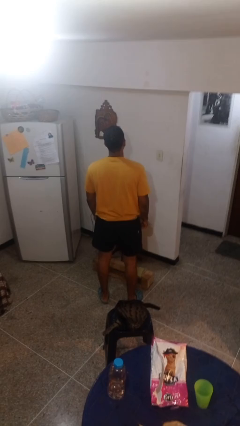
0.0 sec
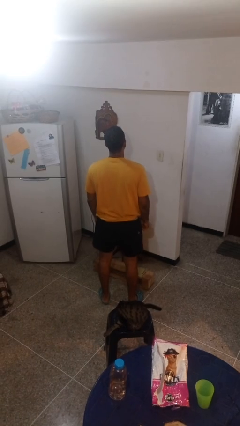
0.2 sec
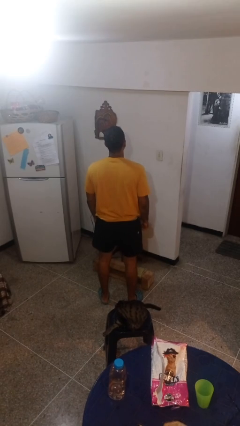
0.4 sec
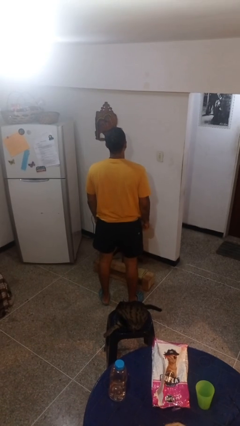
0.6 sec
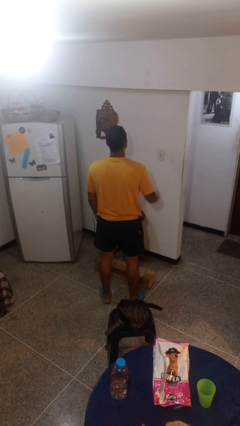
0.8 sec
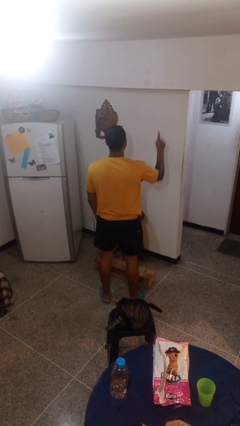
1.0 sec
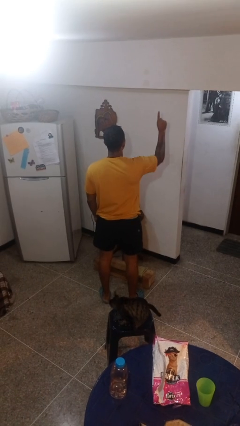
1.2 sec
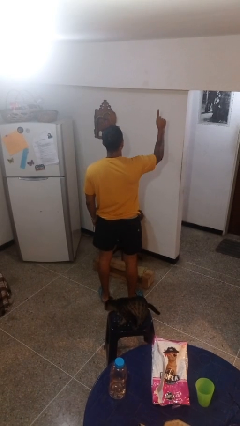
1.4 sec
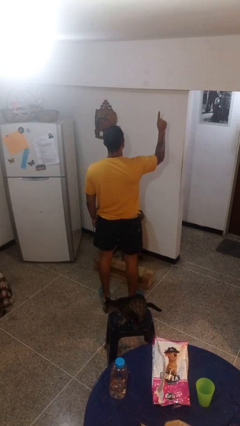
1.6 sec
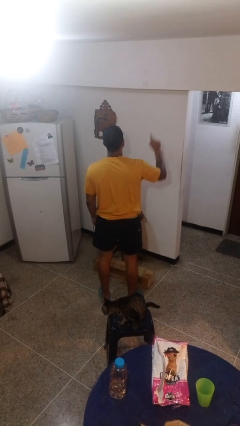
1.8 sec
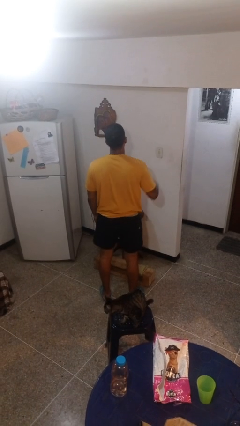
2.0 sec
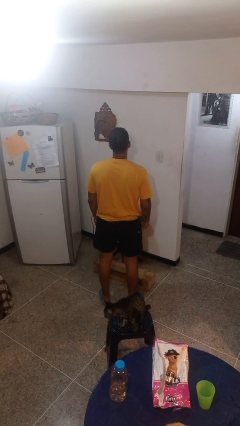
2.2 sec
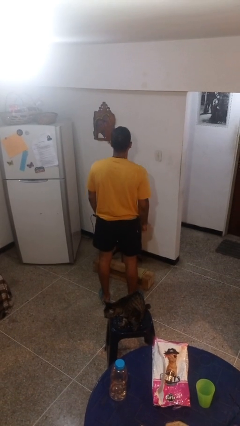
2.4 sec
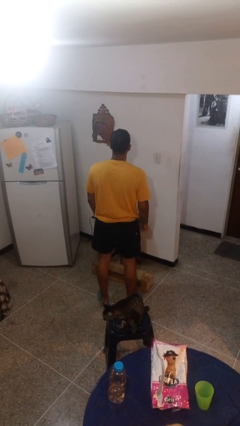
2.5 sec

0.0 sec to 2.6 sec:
person gestures number one

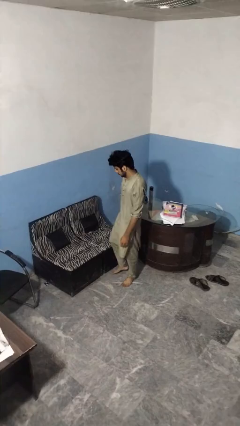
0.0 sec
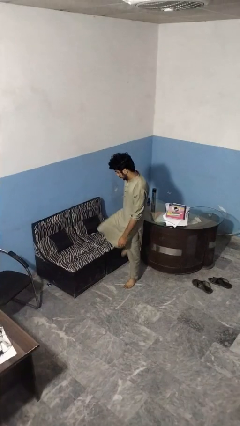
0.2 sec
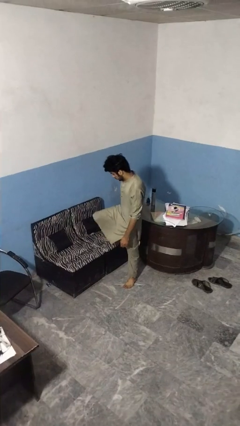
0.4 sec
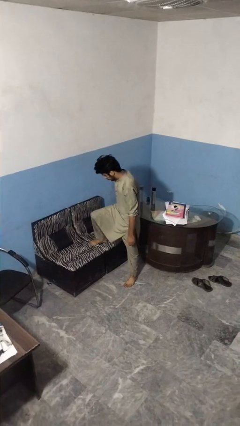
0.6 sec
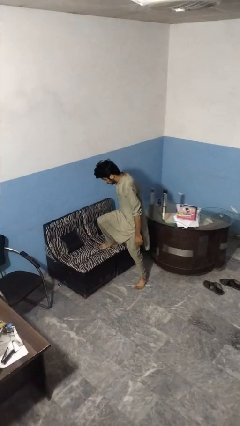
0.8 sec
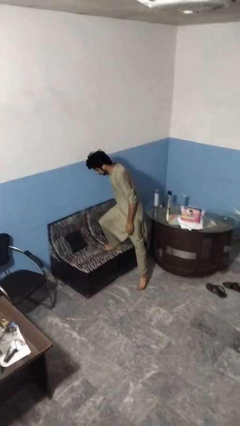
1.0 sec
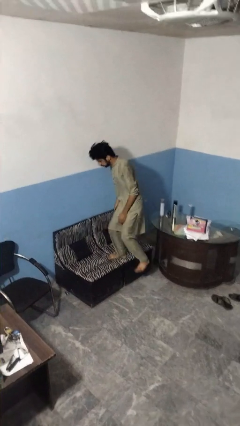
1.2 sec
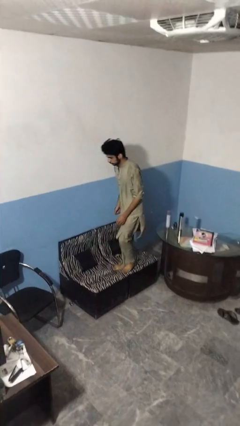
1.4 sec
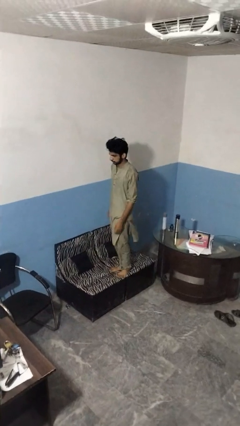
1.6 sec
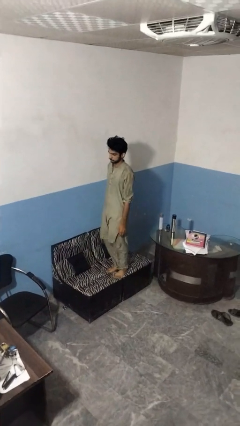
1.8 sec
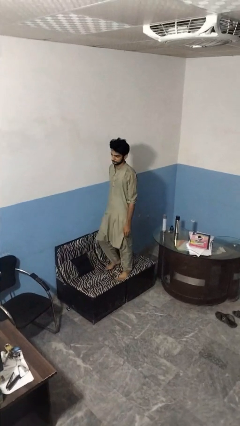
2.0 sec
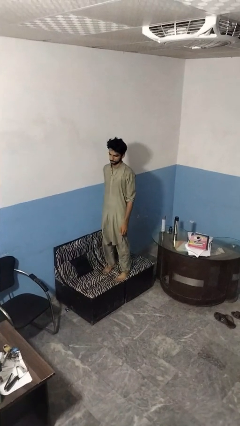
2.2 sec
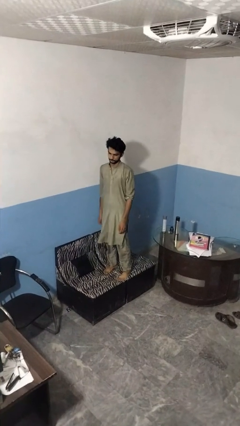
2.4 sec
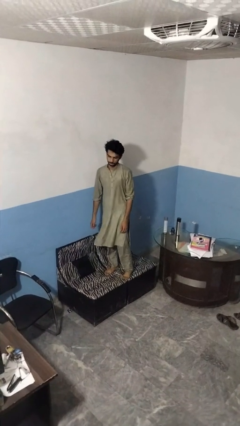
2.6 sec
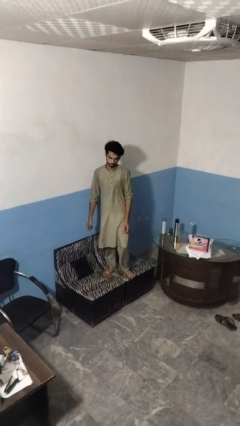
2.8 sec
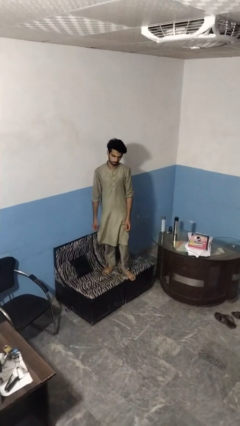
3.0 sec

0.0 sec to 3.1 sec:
person climbs on couch

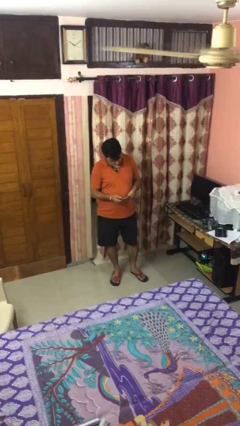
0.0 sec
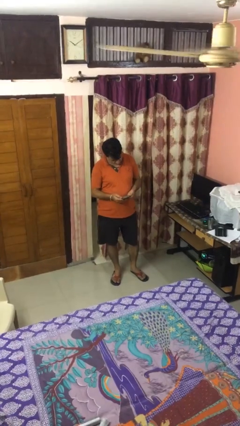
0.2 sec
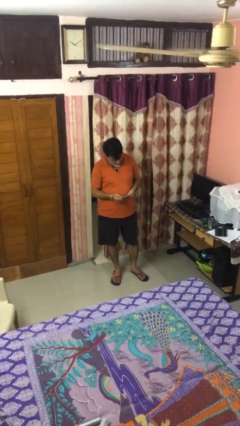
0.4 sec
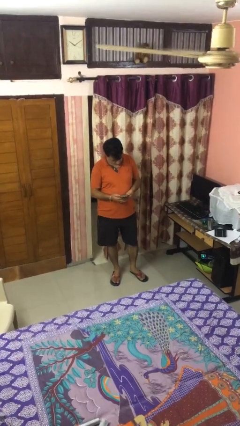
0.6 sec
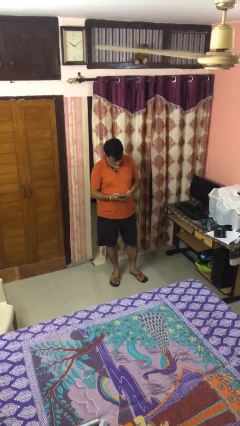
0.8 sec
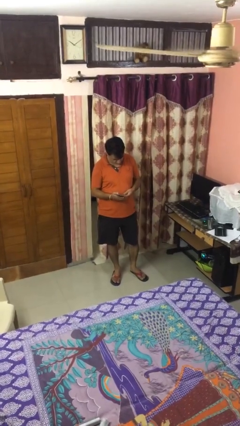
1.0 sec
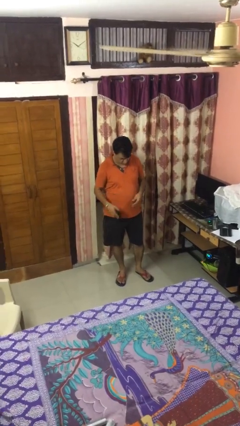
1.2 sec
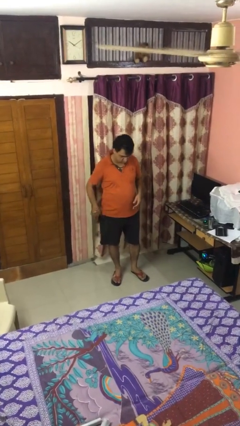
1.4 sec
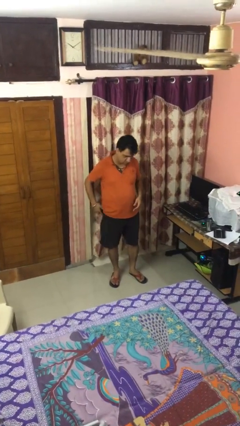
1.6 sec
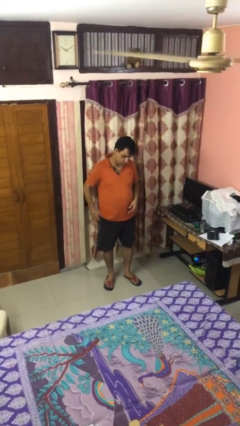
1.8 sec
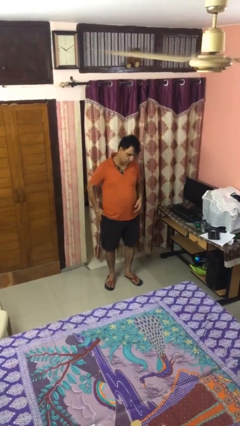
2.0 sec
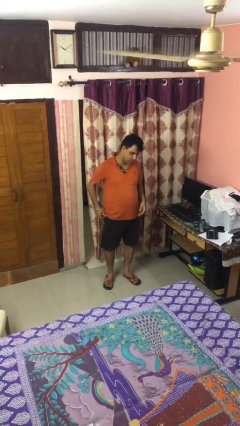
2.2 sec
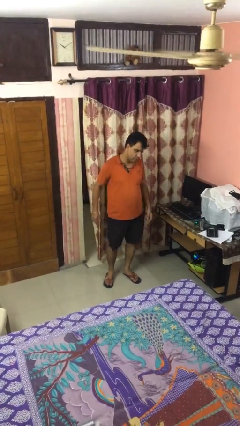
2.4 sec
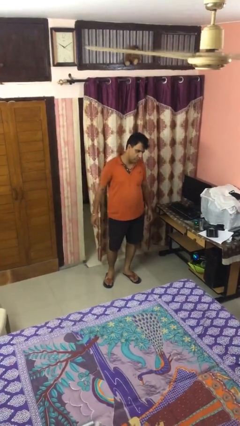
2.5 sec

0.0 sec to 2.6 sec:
person puts phone into pocket

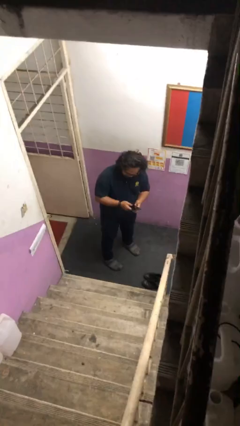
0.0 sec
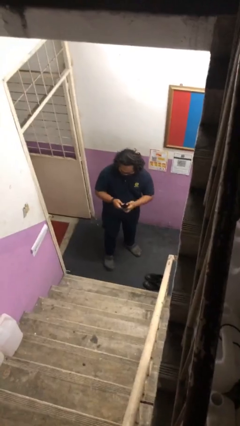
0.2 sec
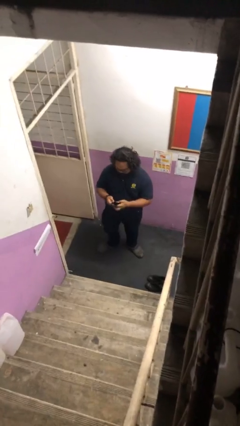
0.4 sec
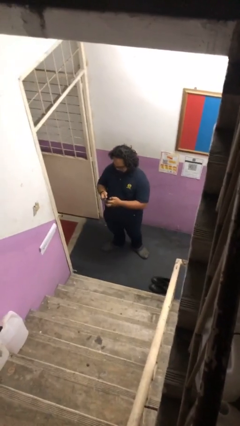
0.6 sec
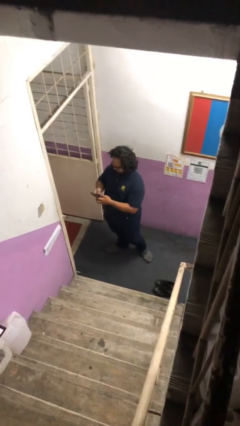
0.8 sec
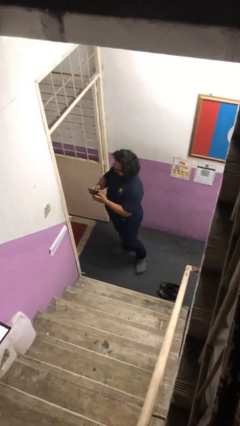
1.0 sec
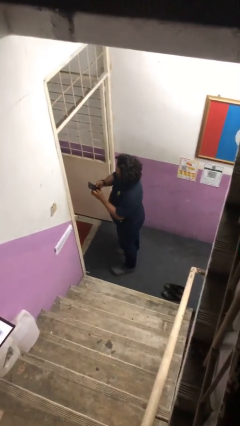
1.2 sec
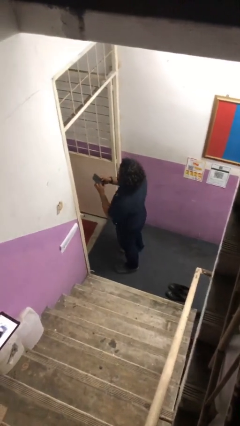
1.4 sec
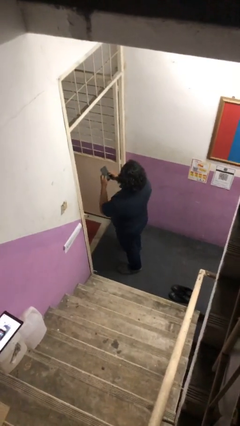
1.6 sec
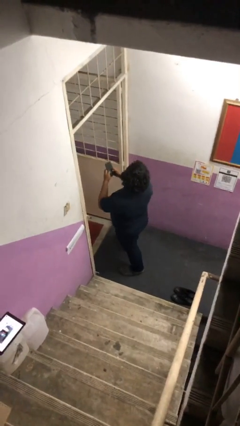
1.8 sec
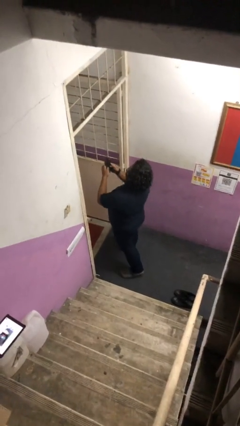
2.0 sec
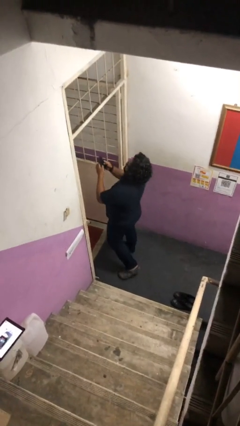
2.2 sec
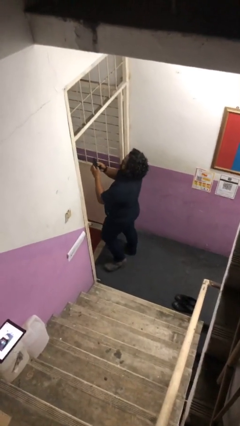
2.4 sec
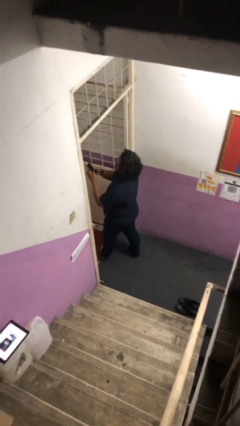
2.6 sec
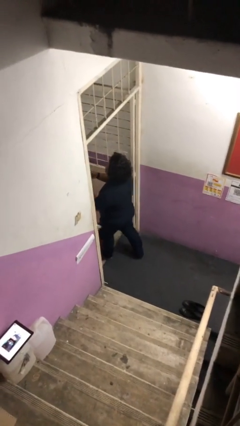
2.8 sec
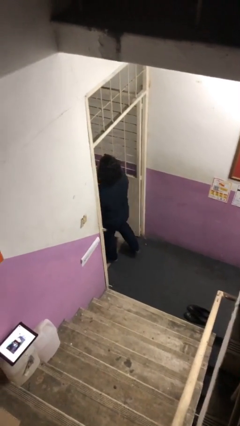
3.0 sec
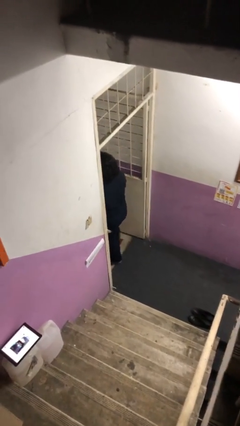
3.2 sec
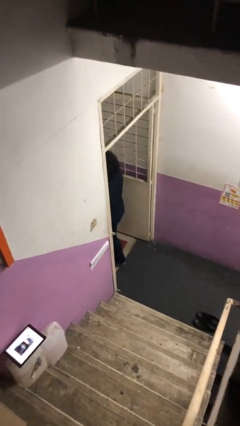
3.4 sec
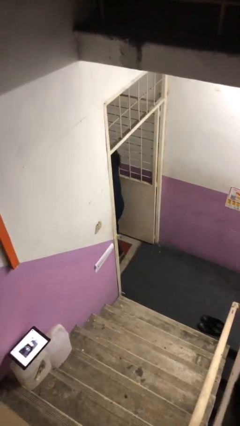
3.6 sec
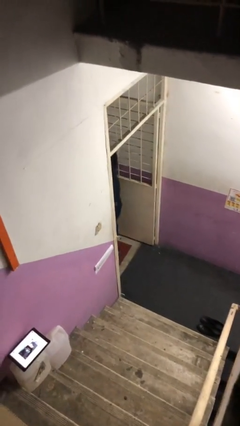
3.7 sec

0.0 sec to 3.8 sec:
person exits scene through structure

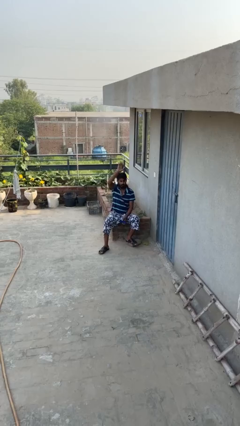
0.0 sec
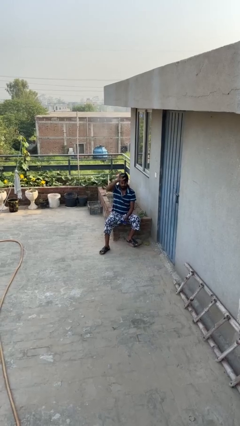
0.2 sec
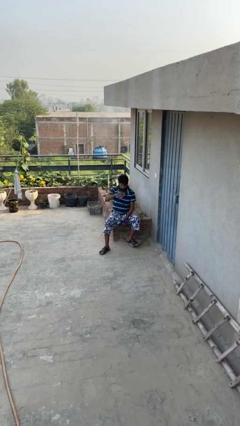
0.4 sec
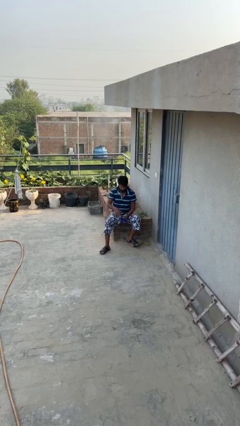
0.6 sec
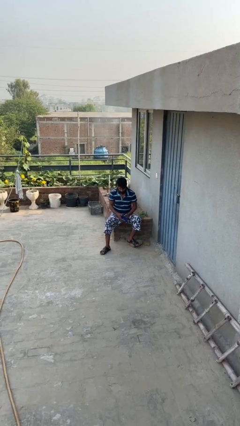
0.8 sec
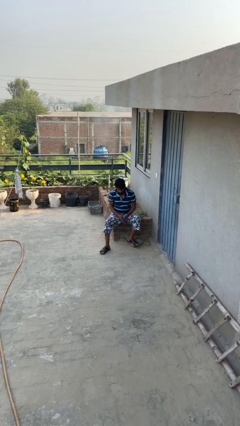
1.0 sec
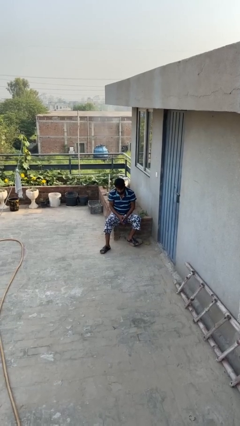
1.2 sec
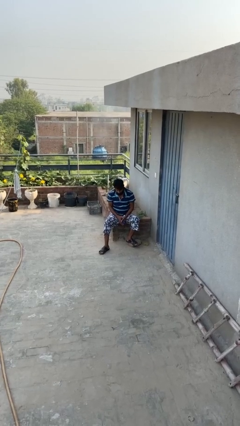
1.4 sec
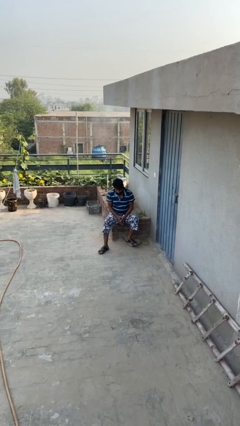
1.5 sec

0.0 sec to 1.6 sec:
person gestures lower hand

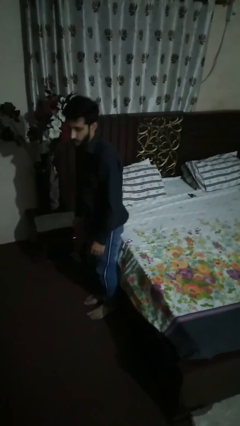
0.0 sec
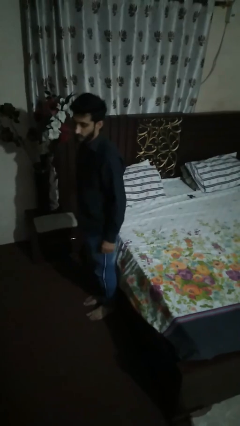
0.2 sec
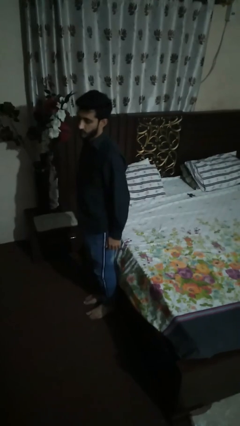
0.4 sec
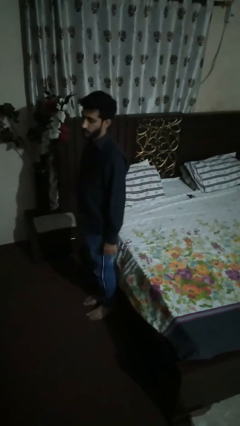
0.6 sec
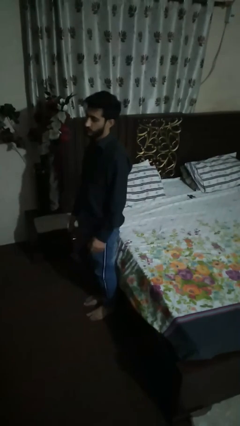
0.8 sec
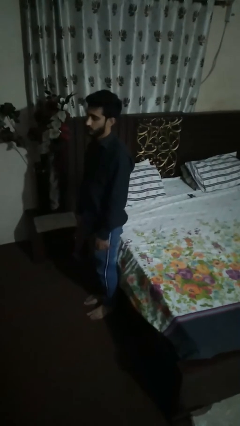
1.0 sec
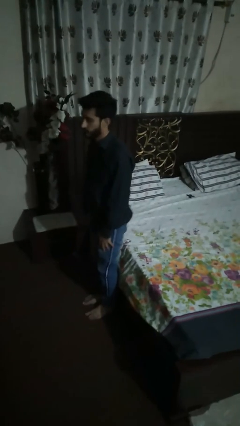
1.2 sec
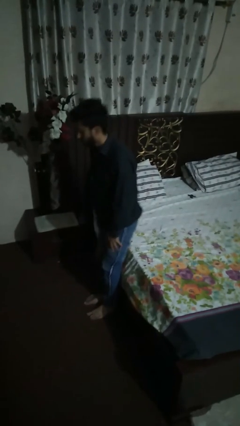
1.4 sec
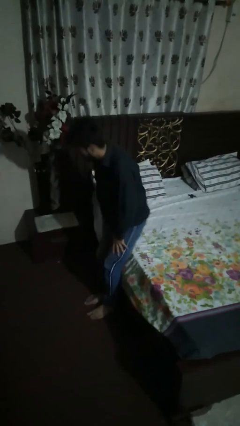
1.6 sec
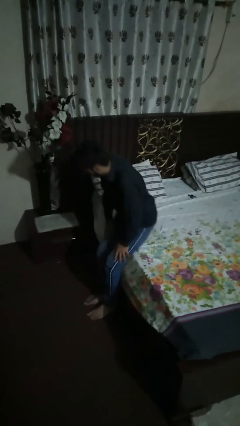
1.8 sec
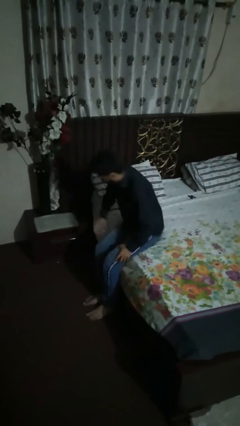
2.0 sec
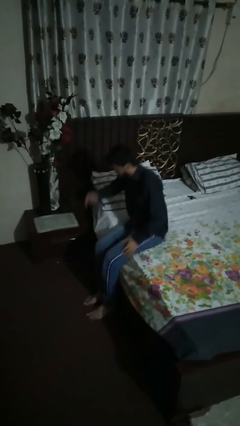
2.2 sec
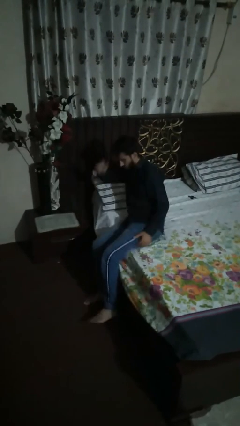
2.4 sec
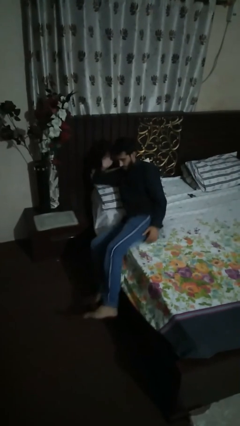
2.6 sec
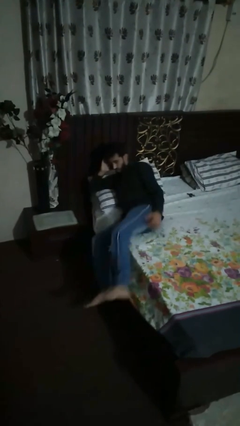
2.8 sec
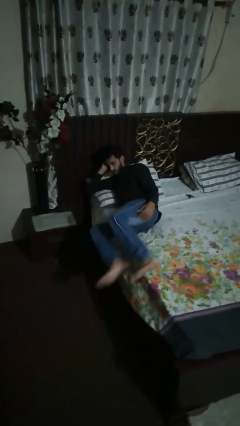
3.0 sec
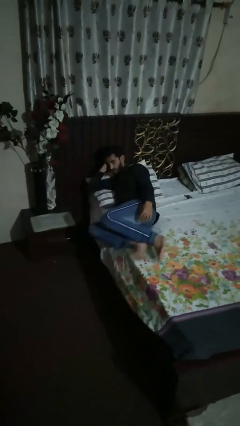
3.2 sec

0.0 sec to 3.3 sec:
person lies down on bed

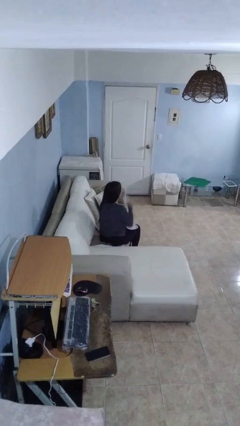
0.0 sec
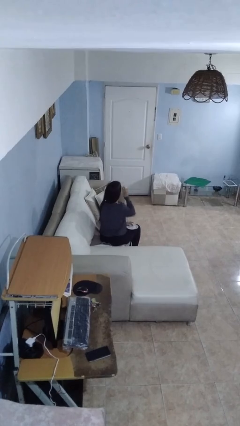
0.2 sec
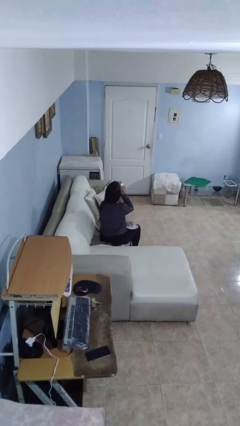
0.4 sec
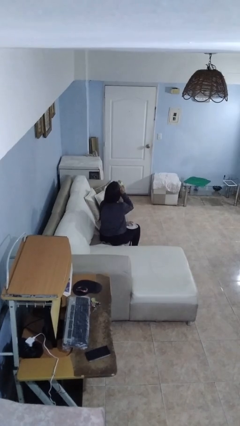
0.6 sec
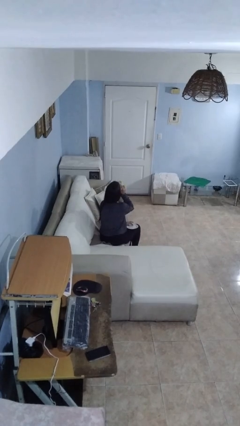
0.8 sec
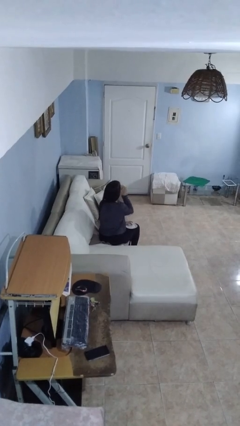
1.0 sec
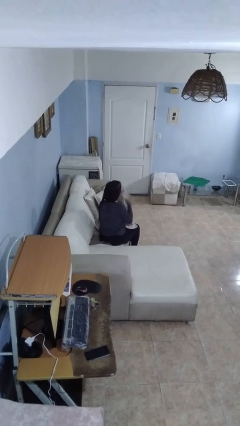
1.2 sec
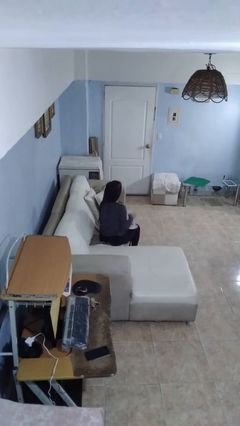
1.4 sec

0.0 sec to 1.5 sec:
person drinks from mug
